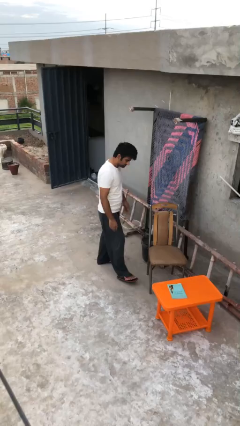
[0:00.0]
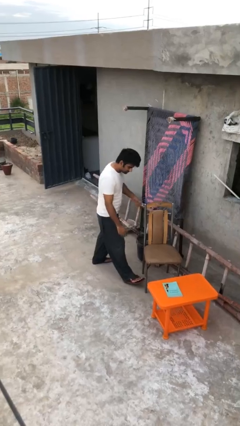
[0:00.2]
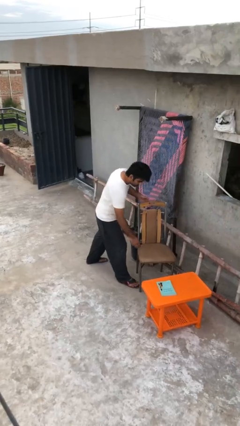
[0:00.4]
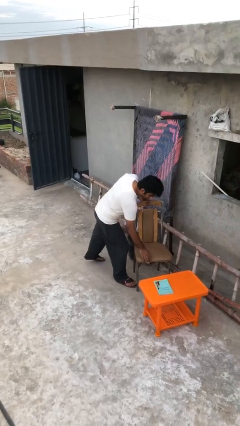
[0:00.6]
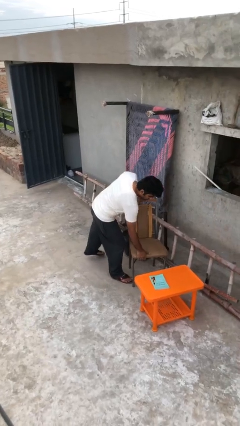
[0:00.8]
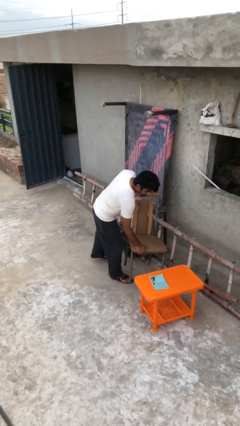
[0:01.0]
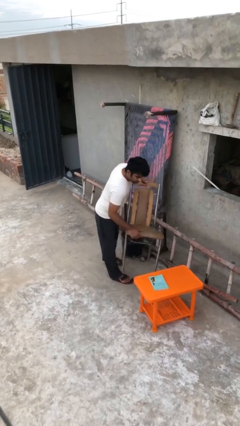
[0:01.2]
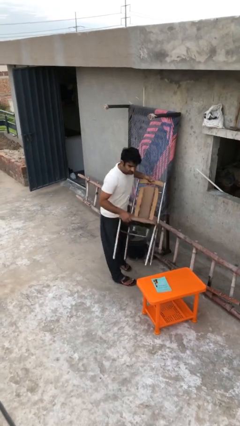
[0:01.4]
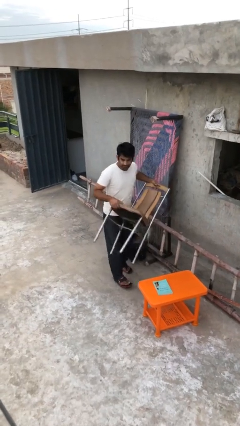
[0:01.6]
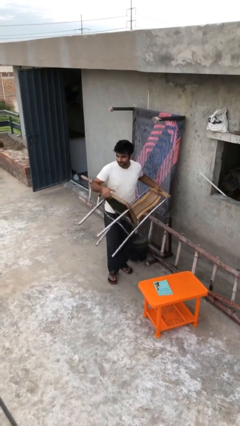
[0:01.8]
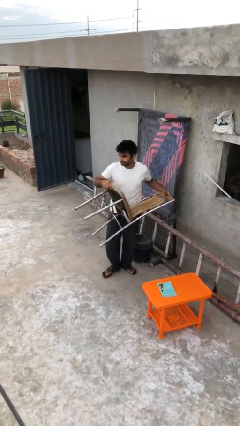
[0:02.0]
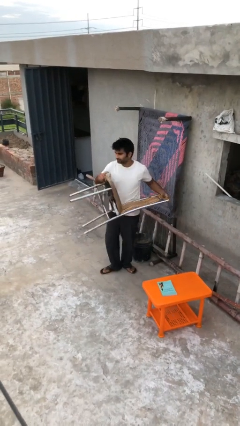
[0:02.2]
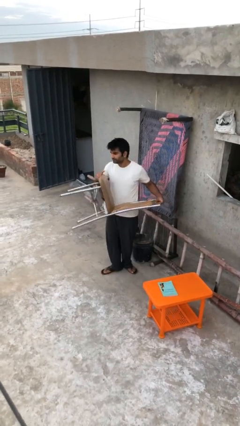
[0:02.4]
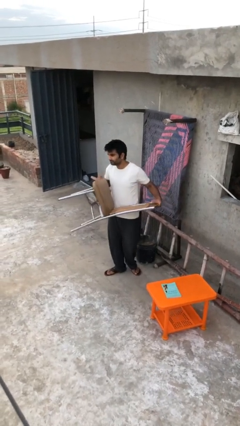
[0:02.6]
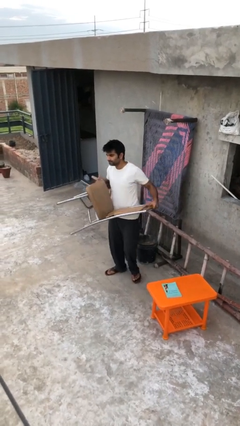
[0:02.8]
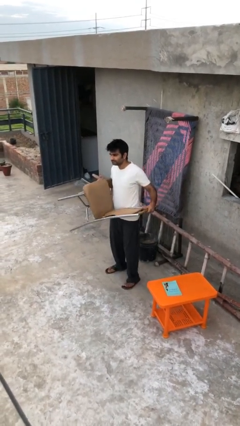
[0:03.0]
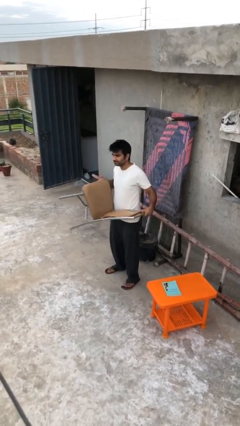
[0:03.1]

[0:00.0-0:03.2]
person picks up object from floor

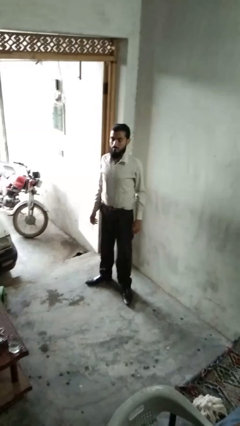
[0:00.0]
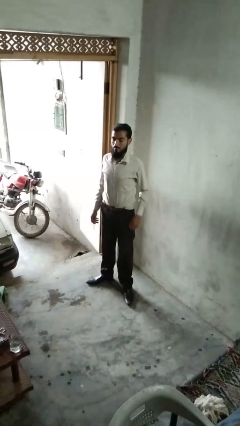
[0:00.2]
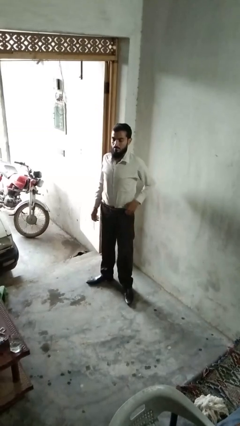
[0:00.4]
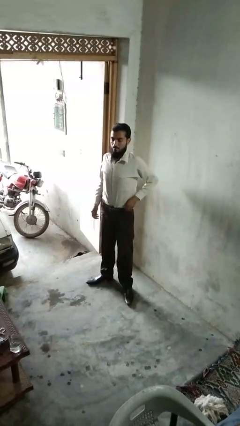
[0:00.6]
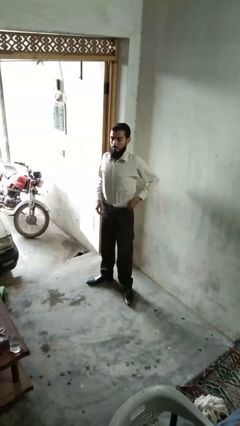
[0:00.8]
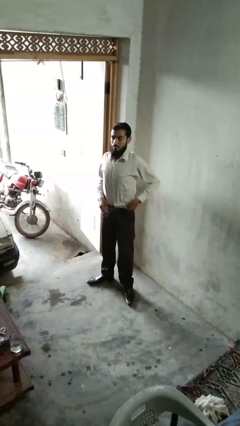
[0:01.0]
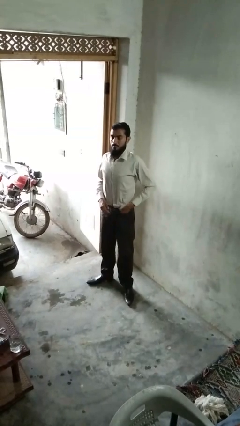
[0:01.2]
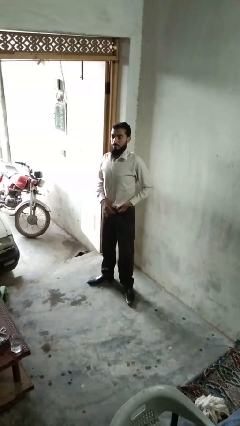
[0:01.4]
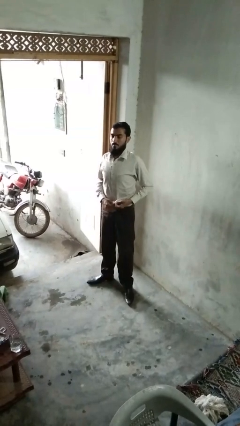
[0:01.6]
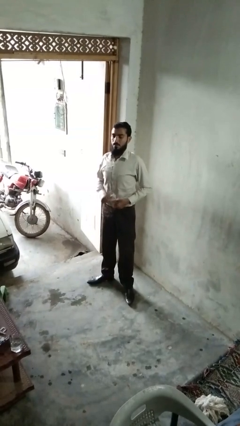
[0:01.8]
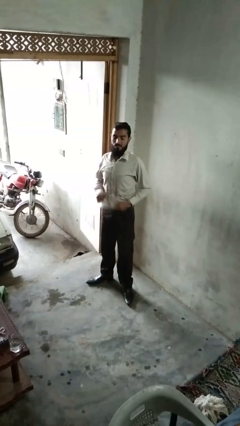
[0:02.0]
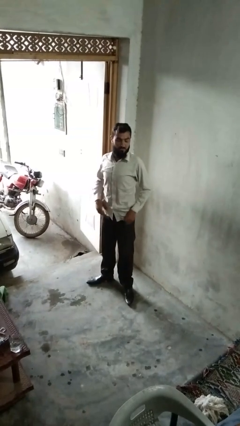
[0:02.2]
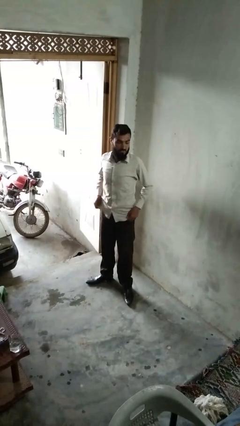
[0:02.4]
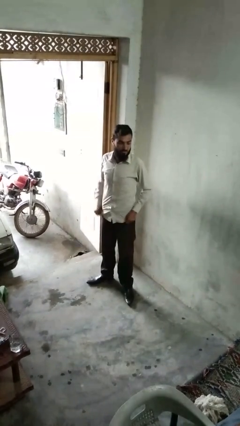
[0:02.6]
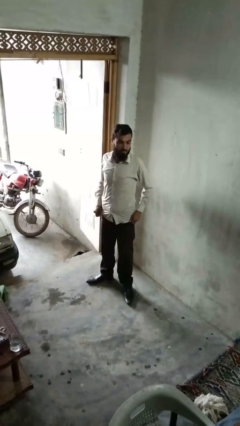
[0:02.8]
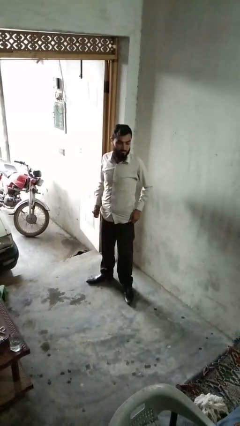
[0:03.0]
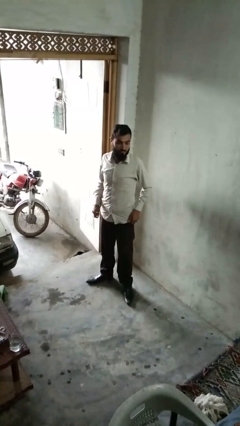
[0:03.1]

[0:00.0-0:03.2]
person untucks shirt

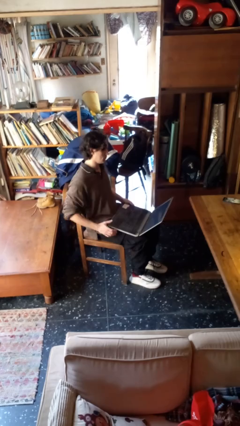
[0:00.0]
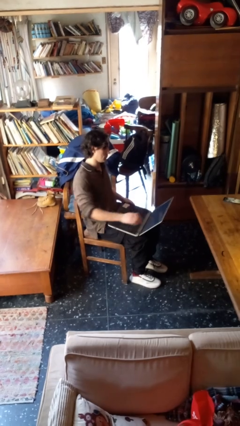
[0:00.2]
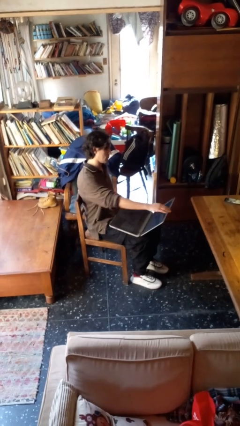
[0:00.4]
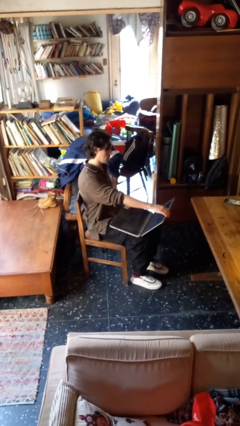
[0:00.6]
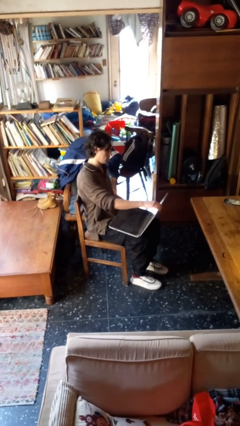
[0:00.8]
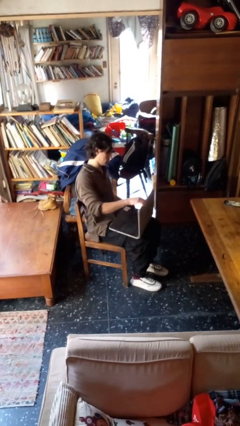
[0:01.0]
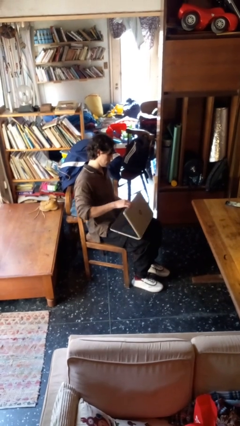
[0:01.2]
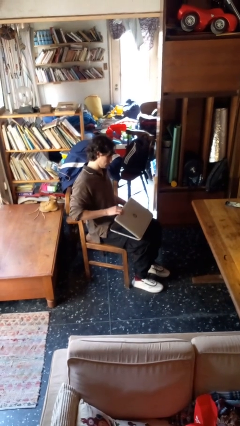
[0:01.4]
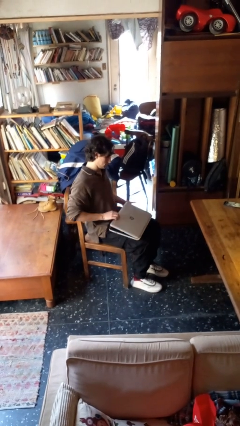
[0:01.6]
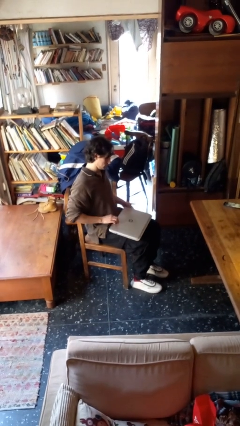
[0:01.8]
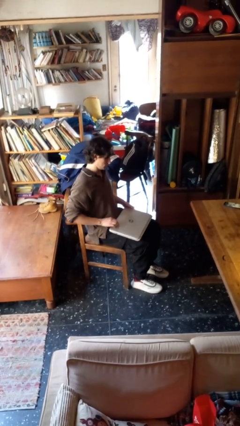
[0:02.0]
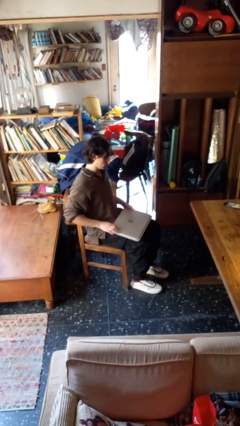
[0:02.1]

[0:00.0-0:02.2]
person closes laptop

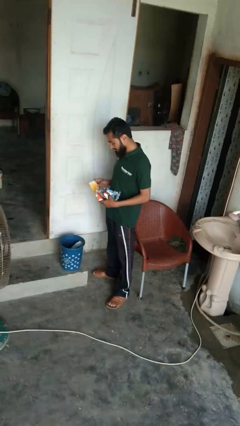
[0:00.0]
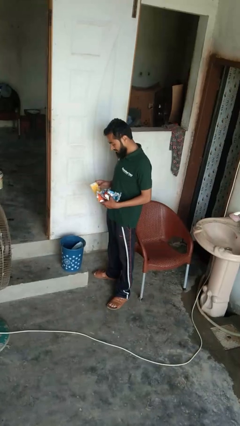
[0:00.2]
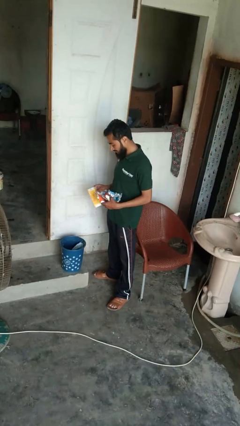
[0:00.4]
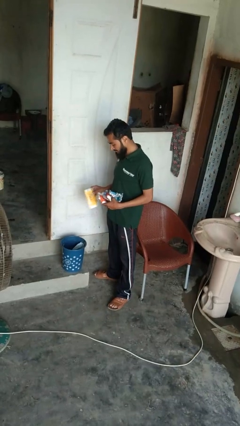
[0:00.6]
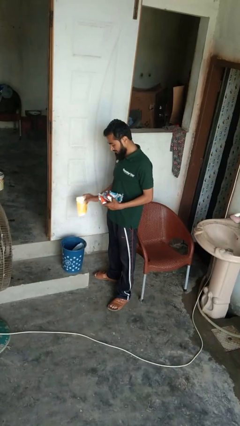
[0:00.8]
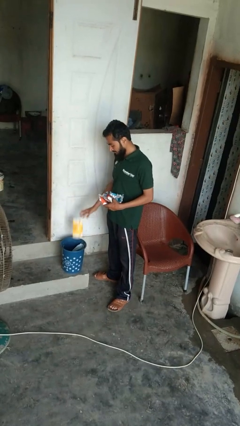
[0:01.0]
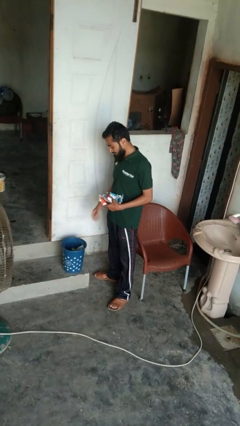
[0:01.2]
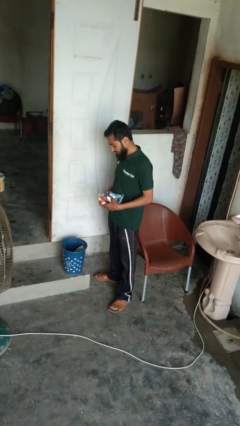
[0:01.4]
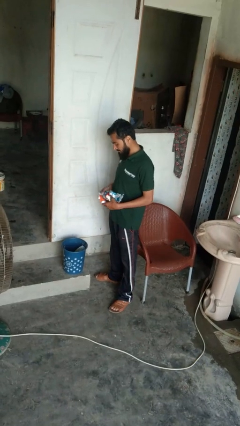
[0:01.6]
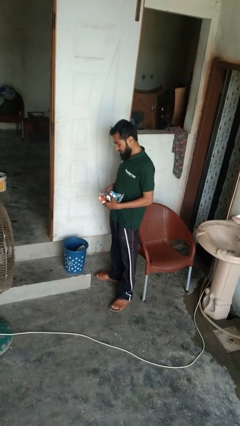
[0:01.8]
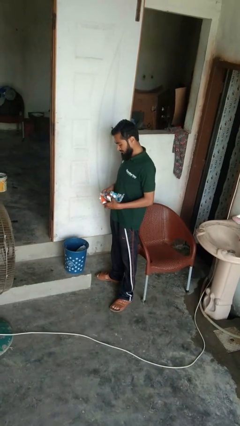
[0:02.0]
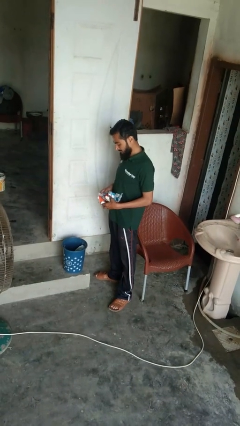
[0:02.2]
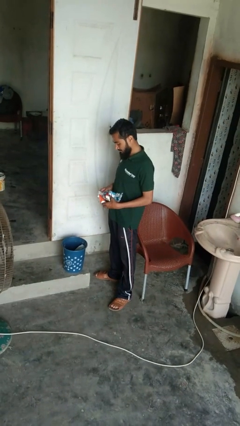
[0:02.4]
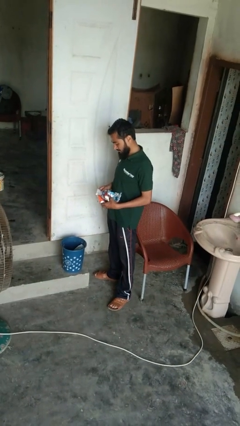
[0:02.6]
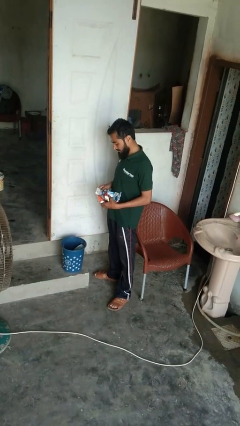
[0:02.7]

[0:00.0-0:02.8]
person discards trash

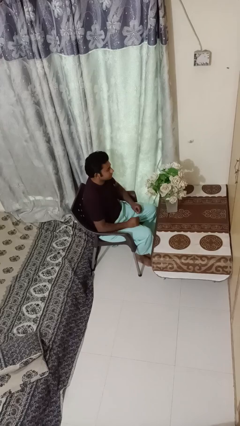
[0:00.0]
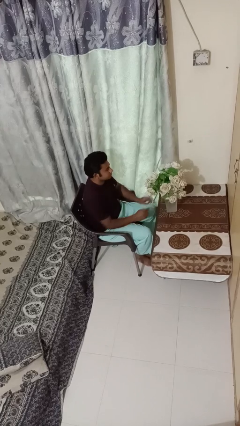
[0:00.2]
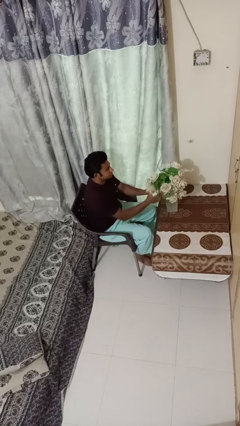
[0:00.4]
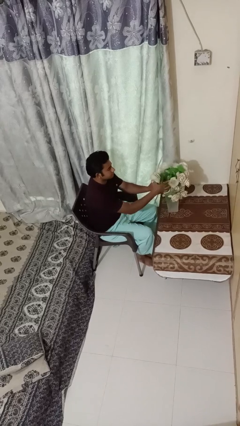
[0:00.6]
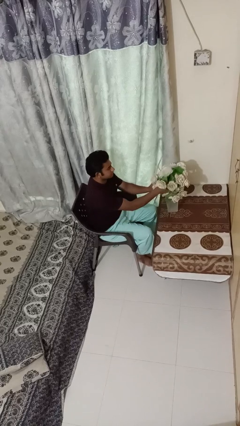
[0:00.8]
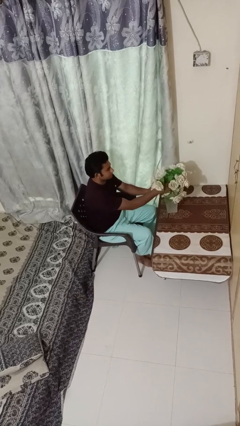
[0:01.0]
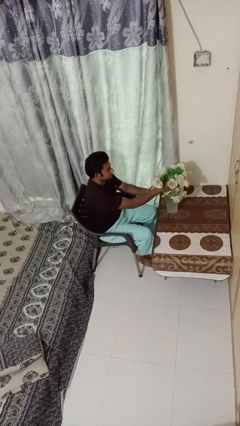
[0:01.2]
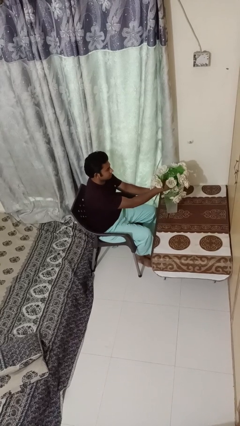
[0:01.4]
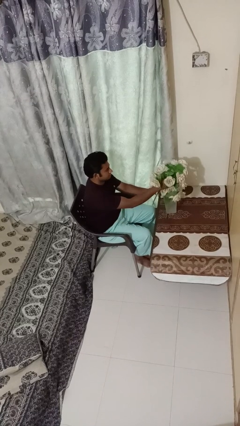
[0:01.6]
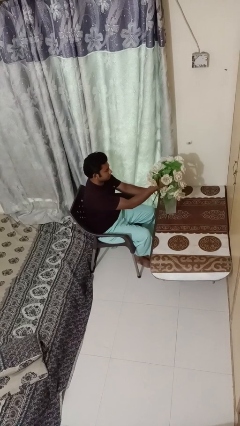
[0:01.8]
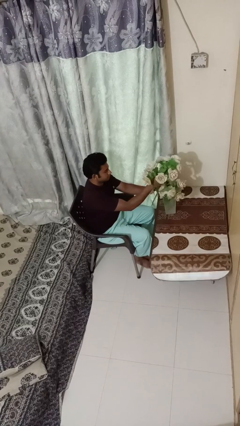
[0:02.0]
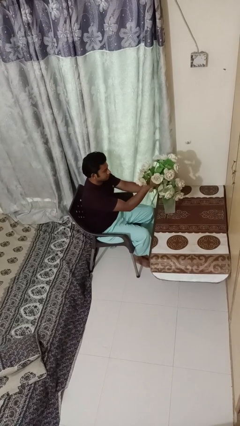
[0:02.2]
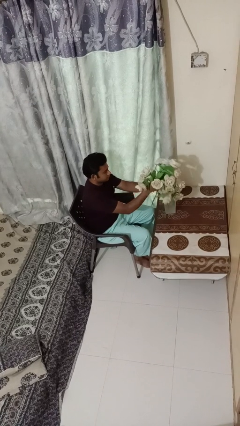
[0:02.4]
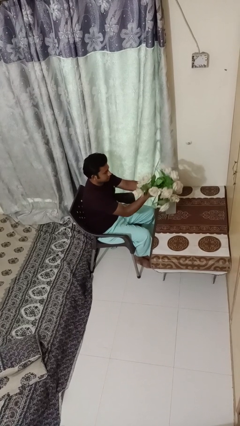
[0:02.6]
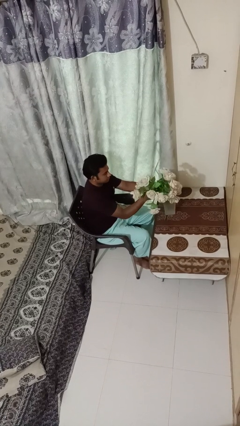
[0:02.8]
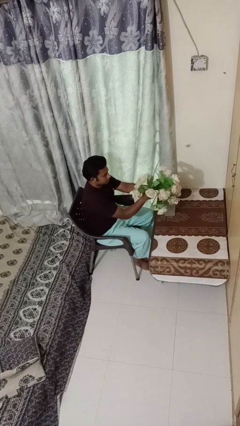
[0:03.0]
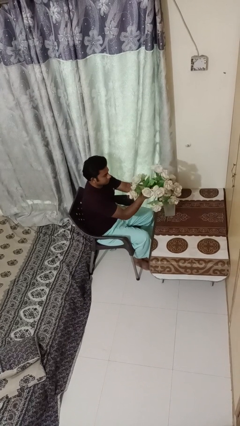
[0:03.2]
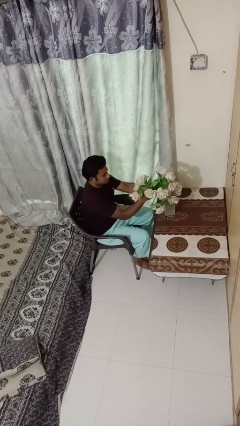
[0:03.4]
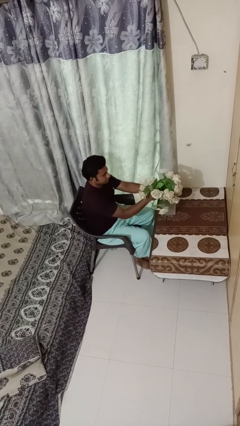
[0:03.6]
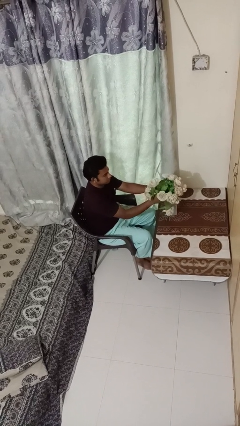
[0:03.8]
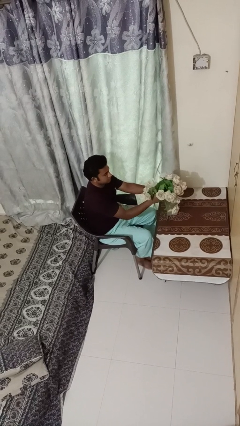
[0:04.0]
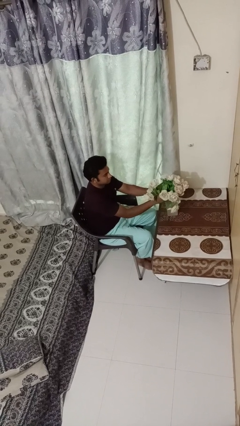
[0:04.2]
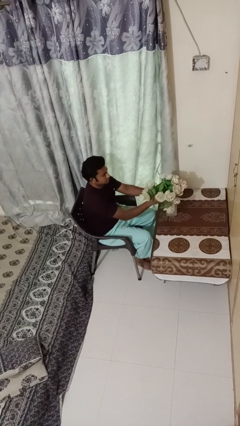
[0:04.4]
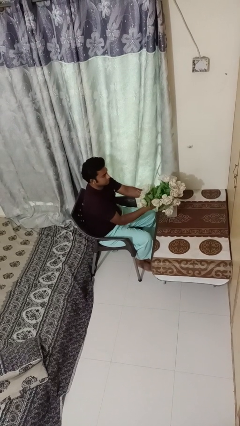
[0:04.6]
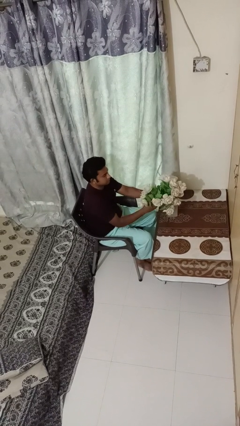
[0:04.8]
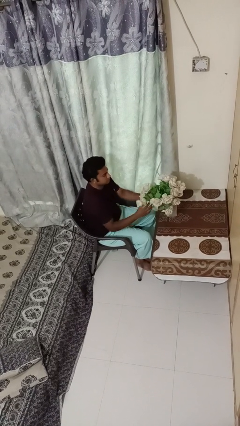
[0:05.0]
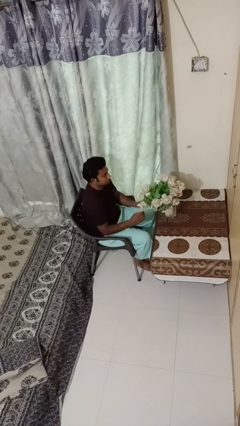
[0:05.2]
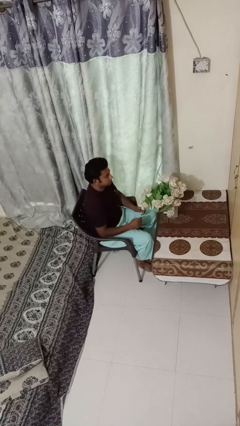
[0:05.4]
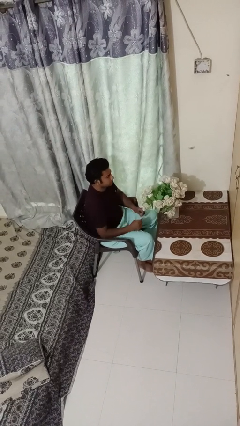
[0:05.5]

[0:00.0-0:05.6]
person arranges flowers in vase

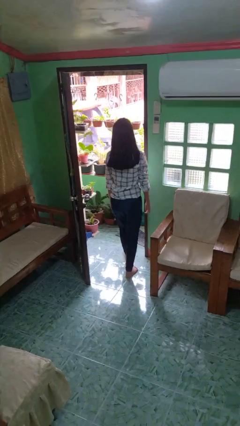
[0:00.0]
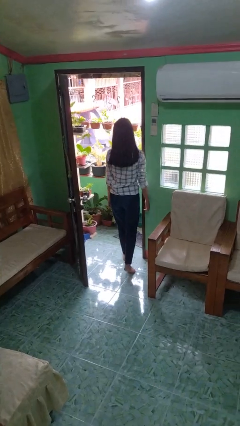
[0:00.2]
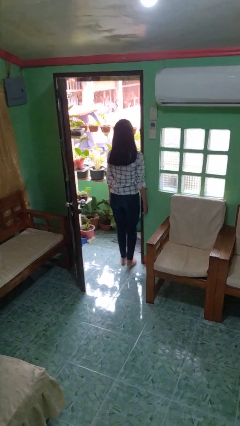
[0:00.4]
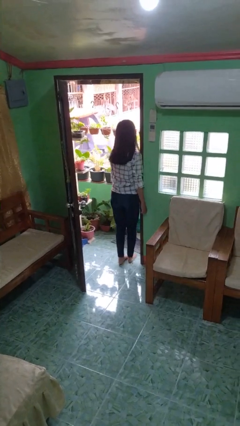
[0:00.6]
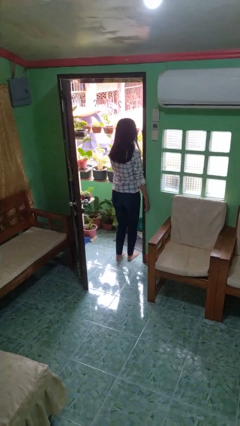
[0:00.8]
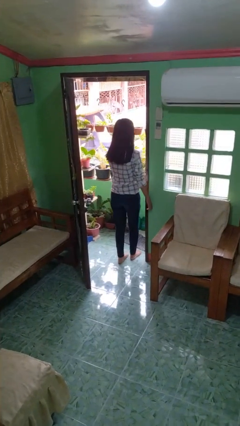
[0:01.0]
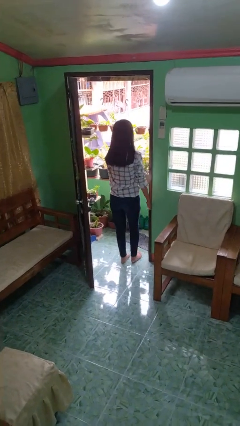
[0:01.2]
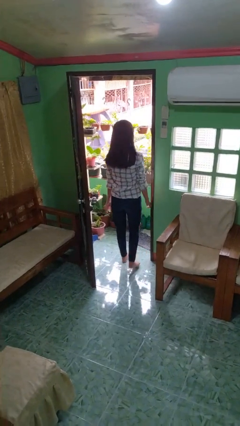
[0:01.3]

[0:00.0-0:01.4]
person bumps into wall
